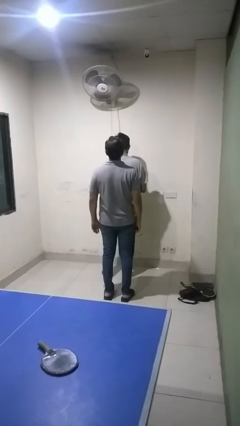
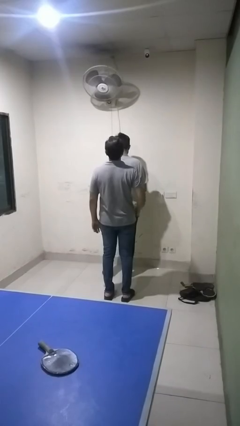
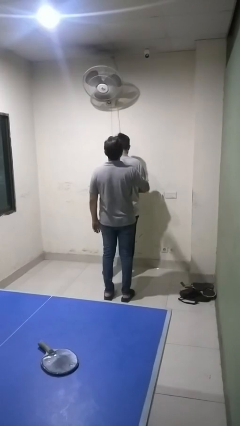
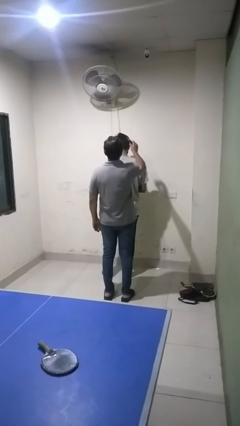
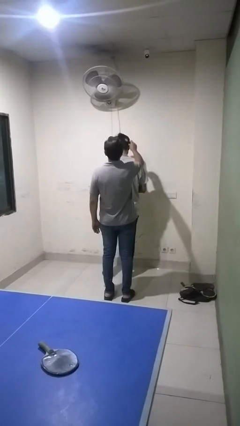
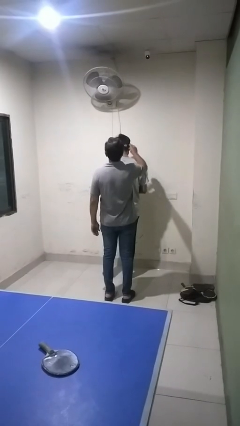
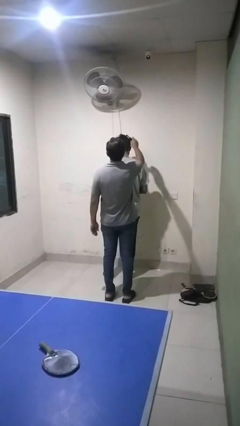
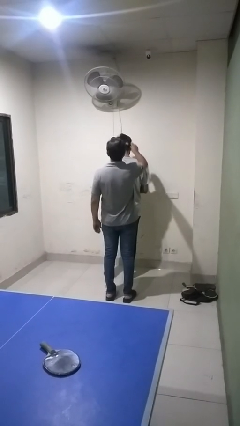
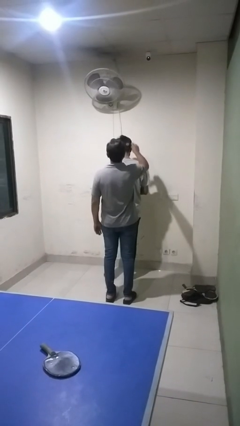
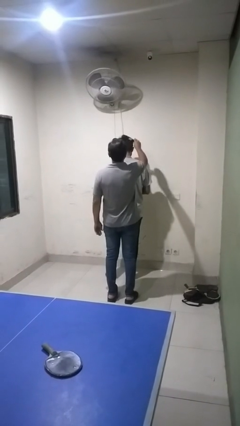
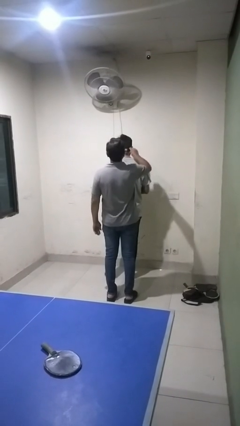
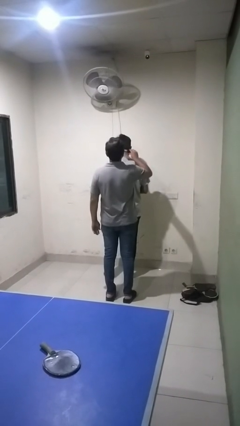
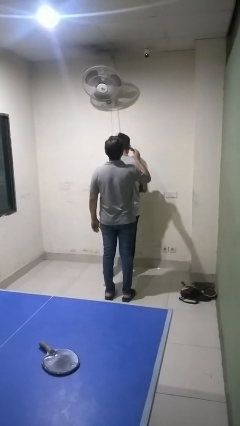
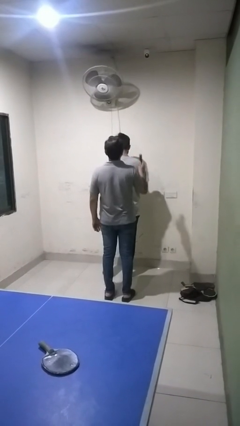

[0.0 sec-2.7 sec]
person brushes hair of person

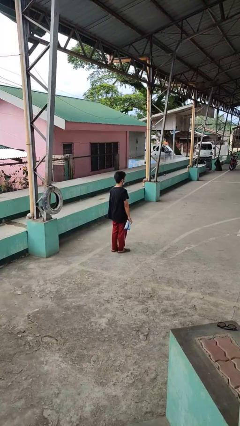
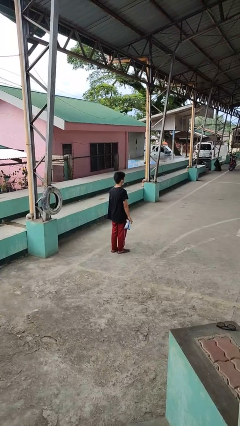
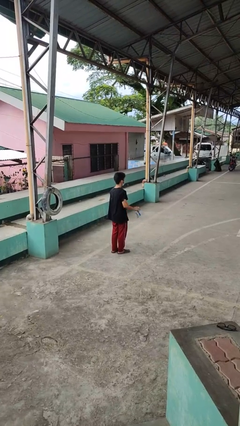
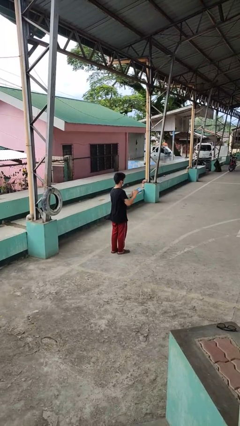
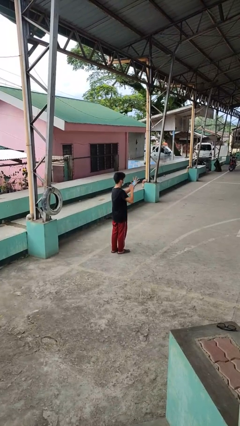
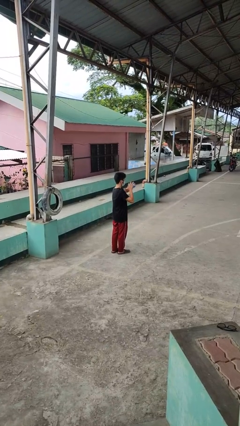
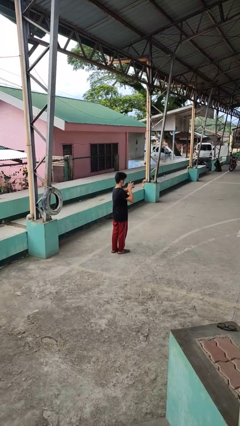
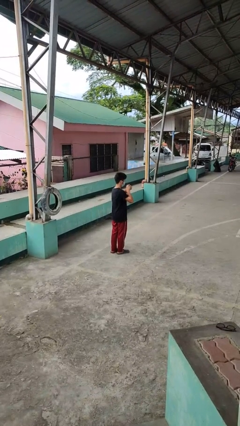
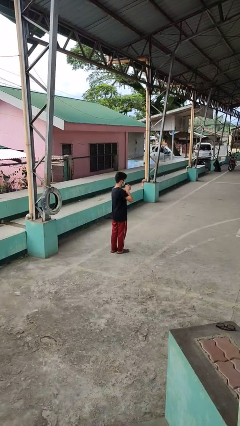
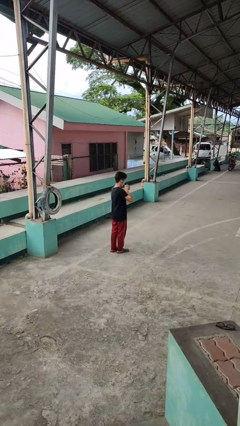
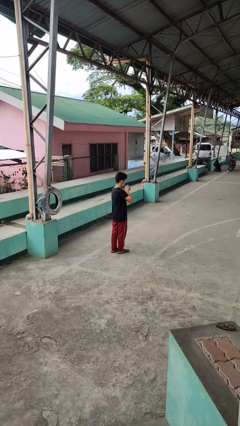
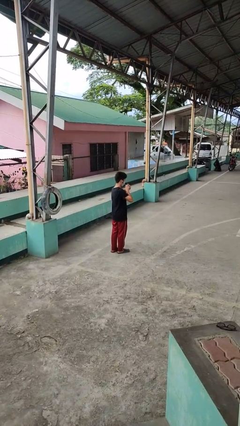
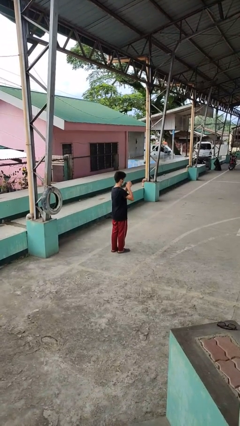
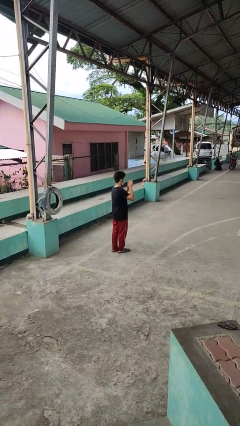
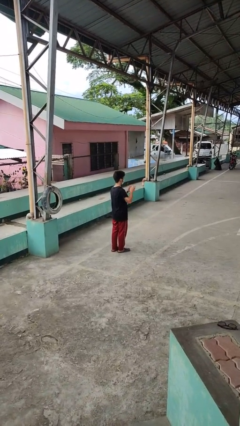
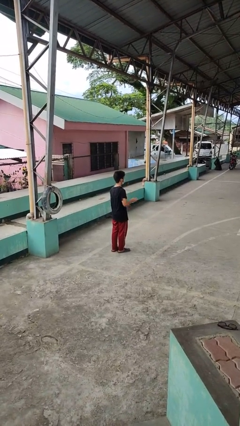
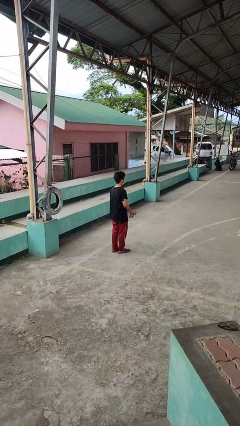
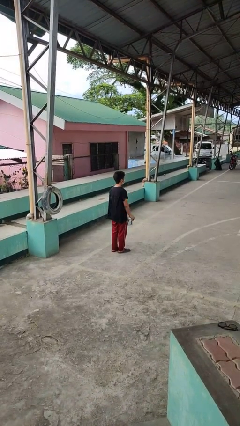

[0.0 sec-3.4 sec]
person squeezes object

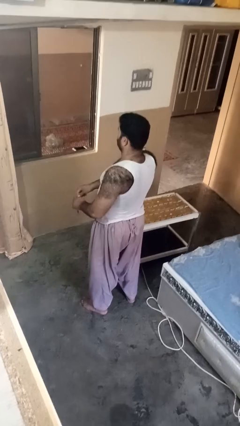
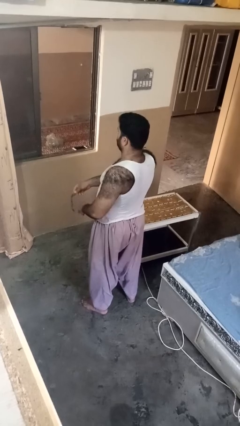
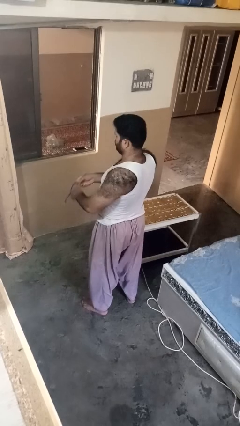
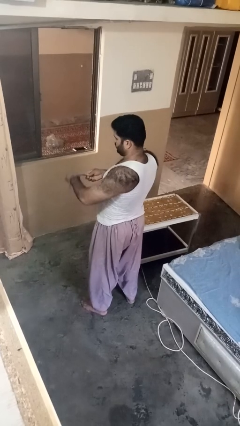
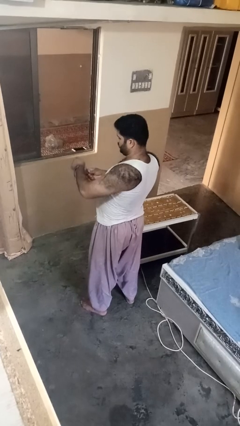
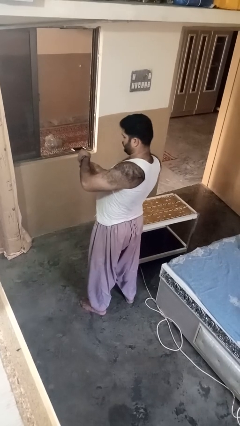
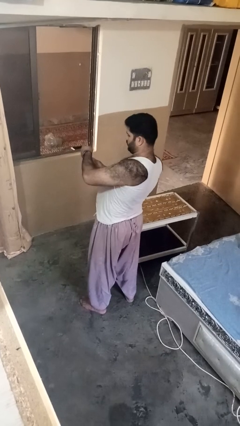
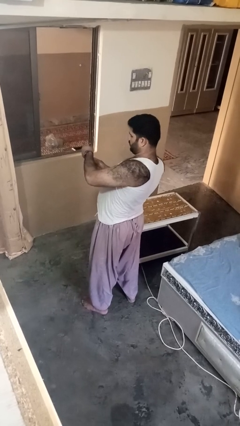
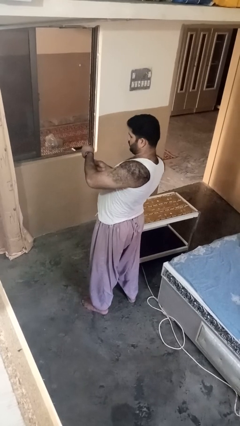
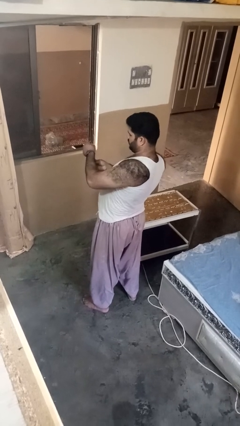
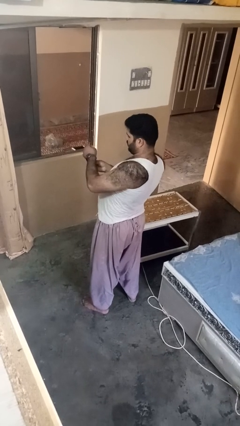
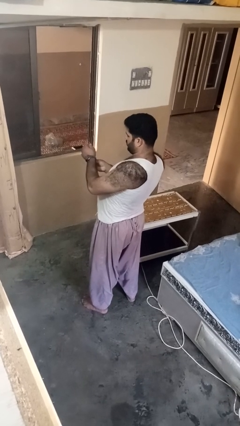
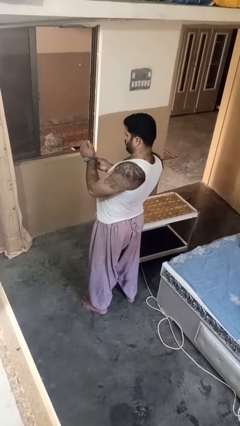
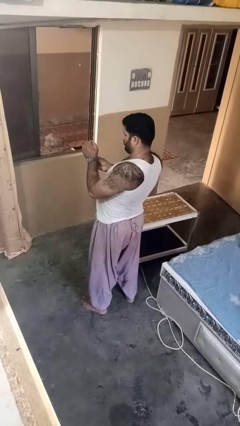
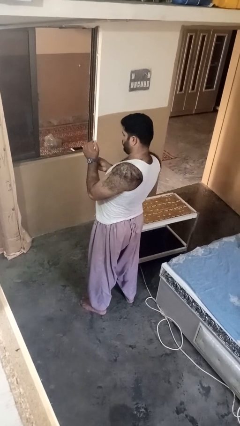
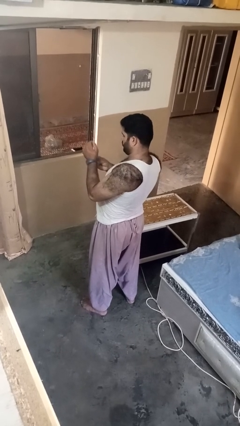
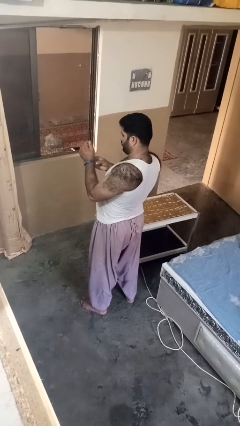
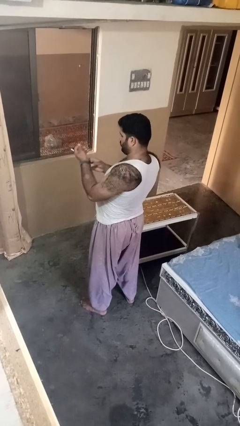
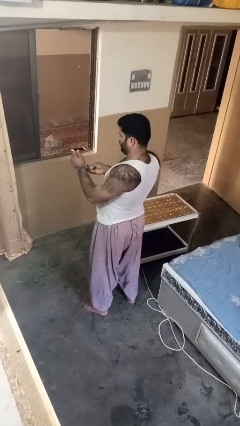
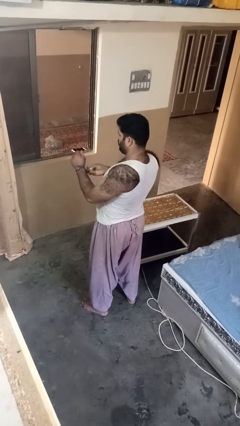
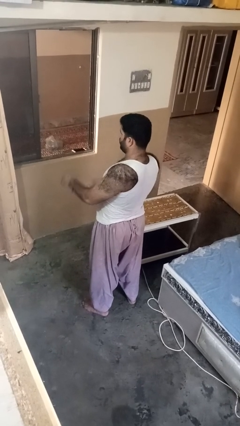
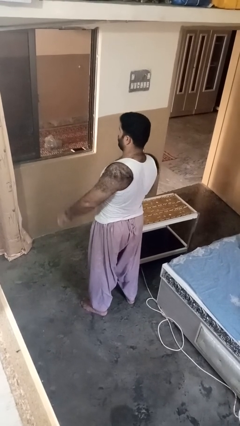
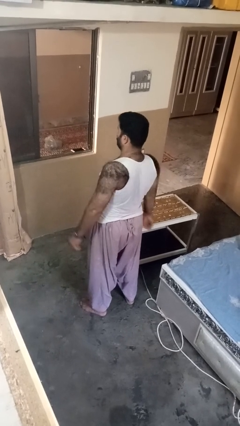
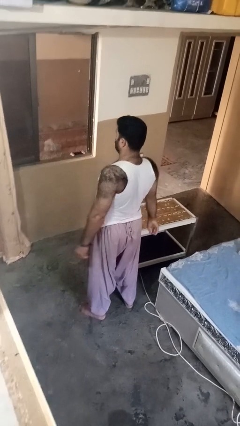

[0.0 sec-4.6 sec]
person puts on wristwatch

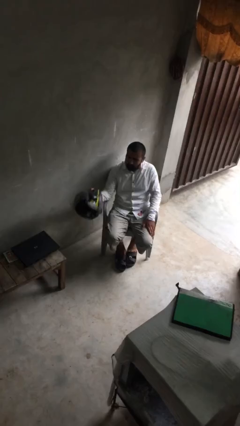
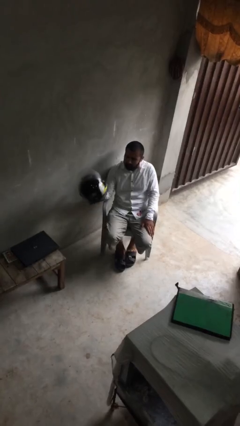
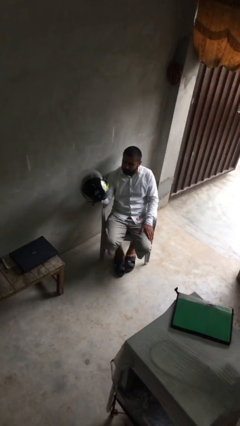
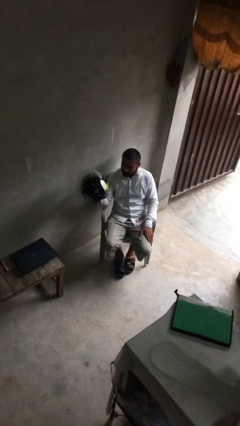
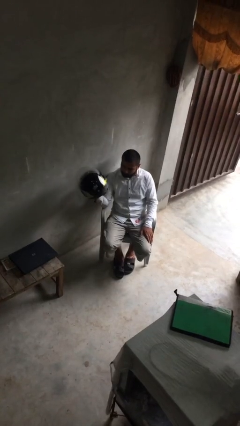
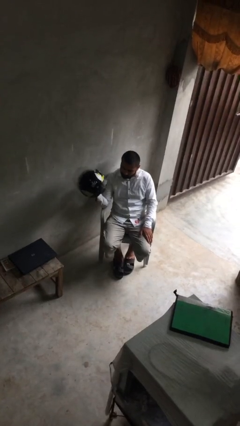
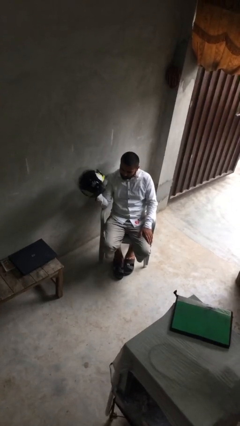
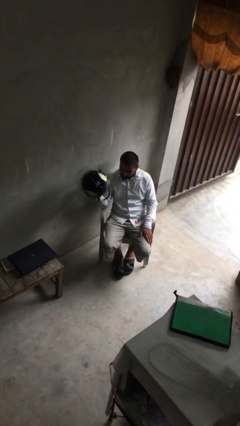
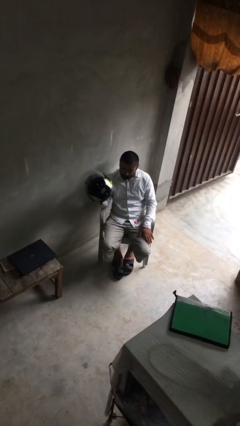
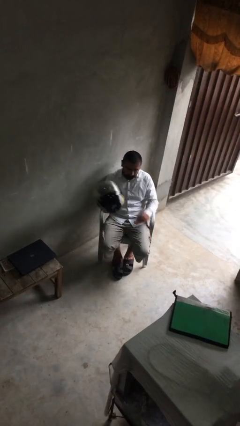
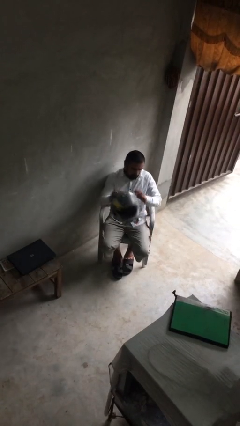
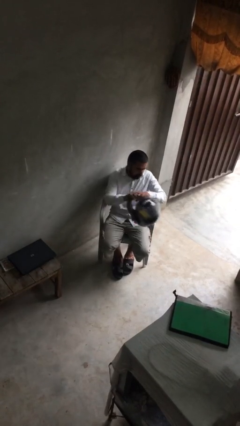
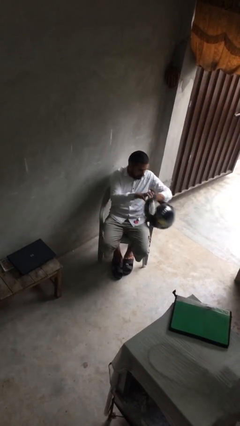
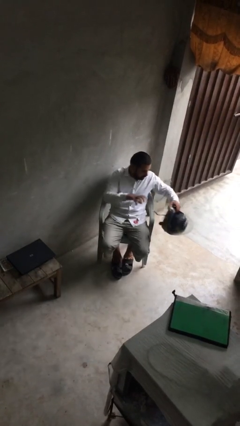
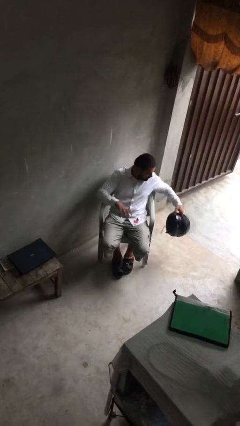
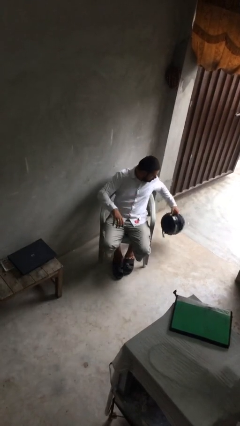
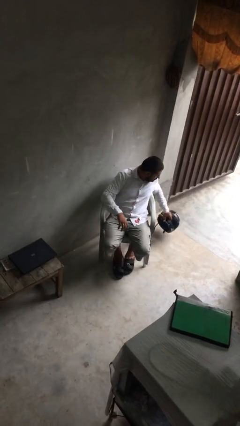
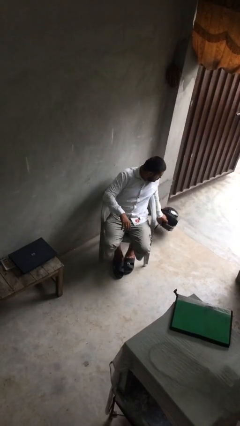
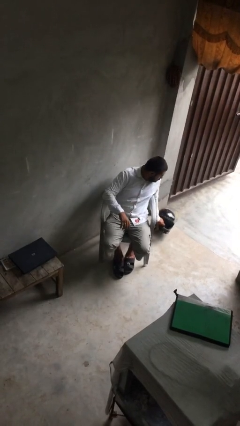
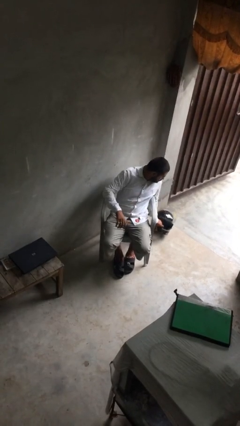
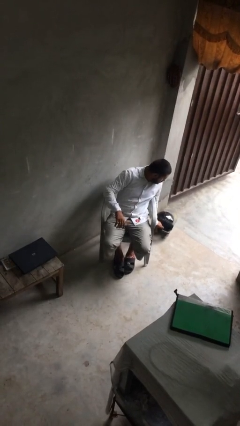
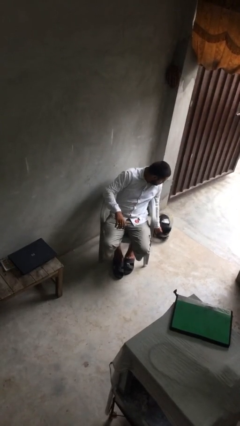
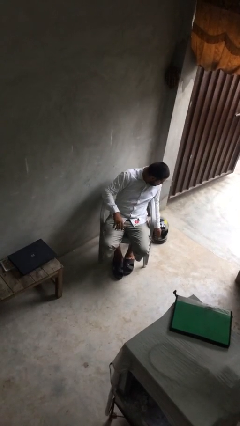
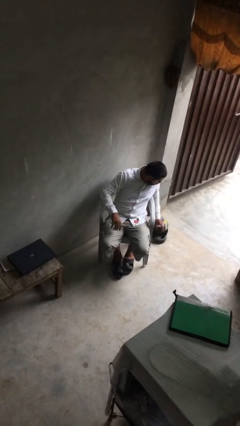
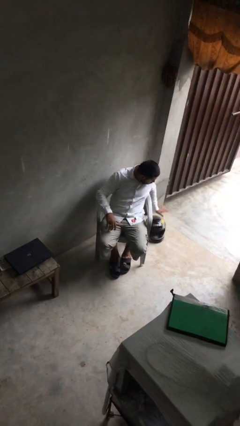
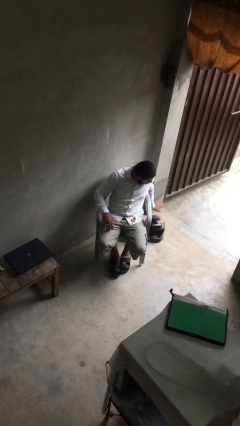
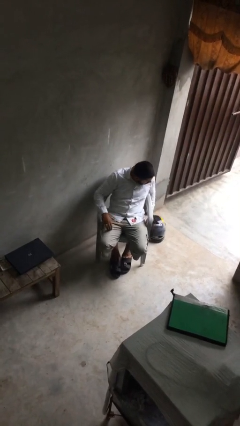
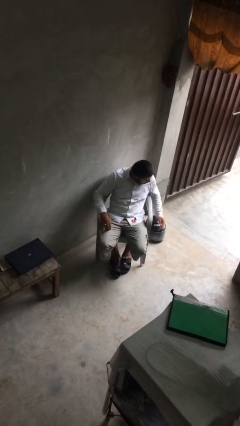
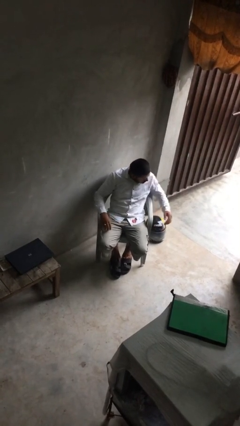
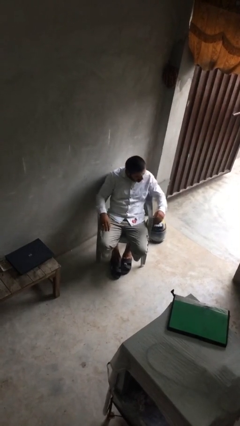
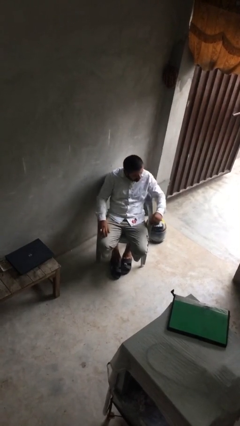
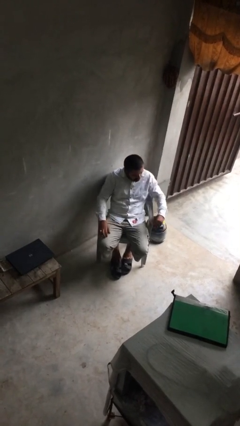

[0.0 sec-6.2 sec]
person puts down object on floor

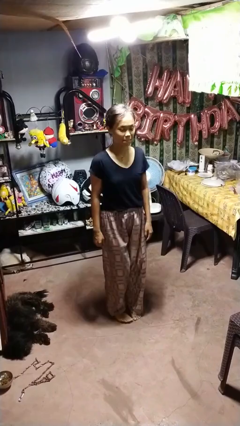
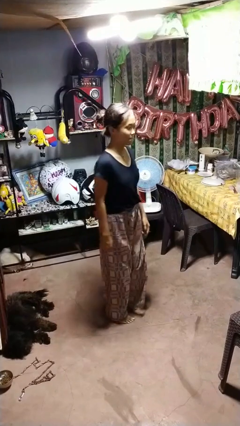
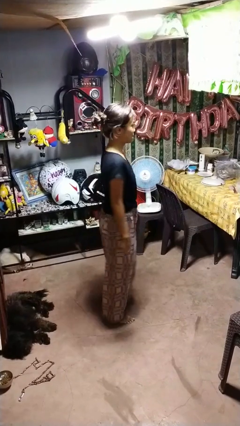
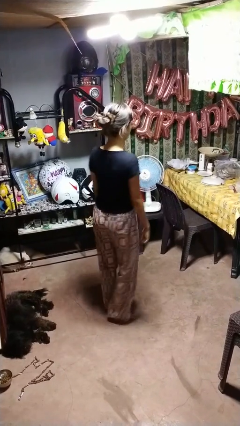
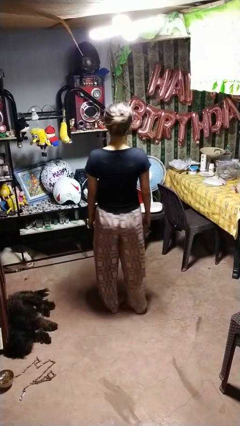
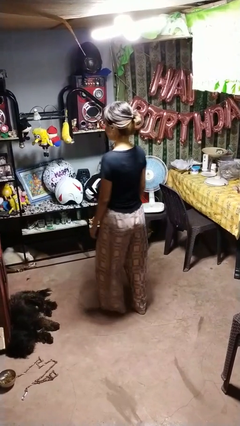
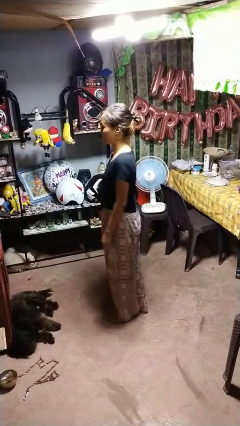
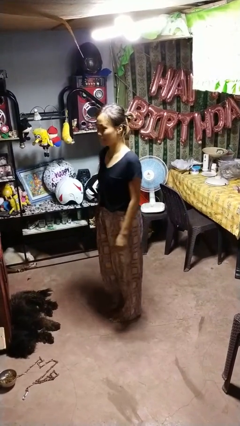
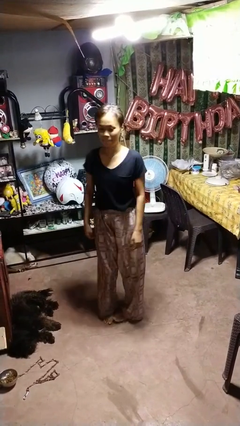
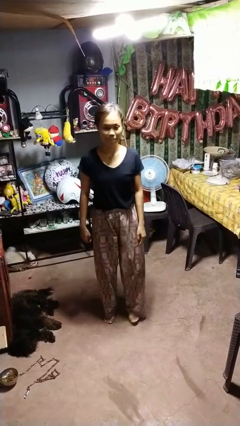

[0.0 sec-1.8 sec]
person twirls
